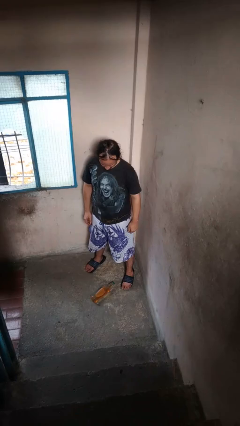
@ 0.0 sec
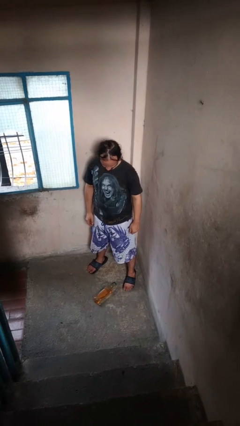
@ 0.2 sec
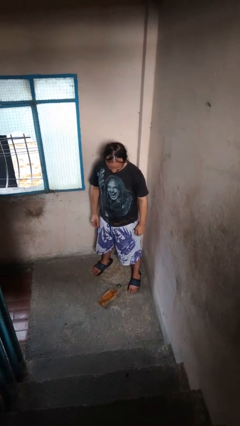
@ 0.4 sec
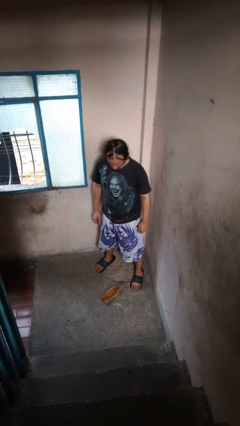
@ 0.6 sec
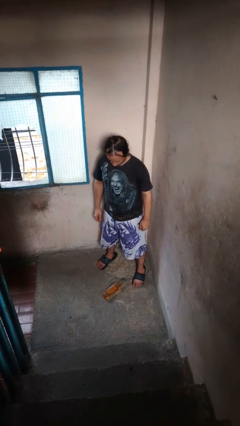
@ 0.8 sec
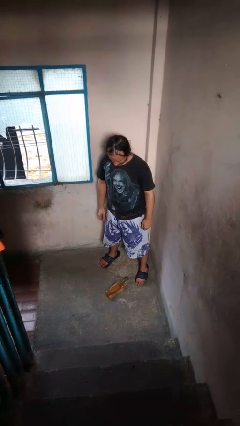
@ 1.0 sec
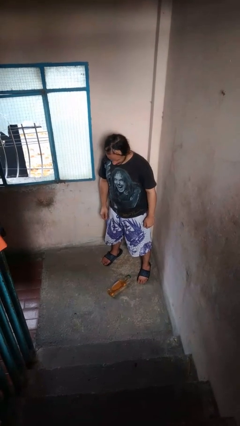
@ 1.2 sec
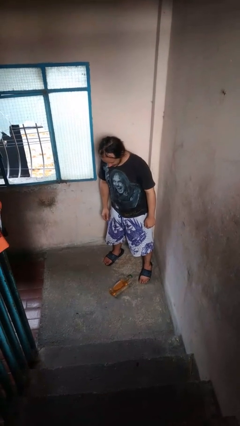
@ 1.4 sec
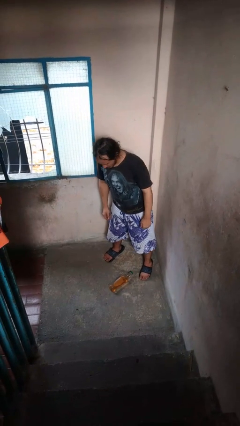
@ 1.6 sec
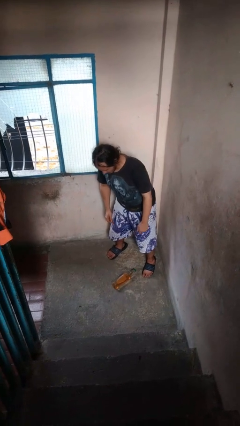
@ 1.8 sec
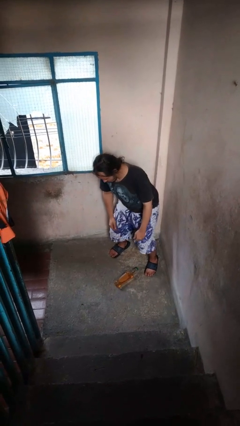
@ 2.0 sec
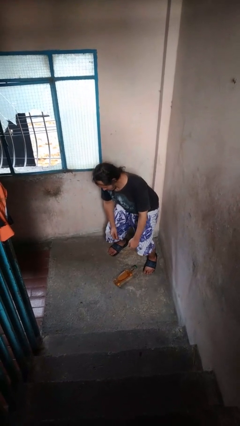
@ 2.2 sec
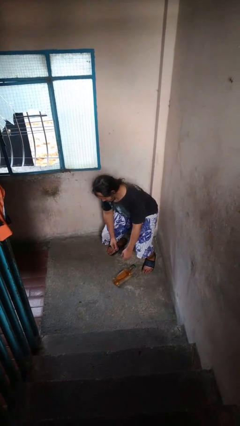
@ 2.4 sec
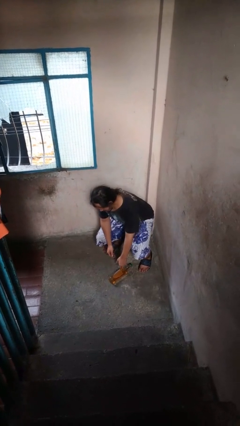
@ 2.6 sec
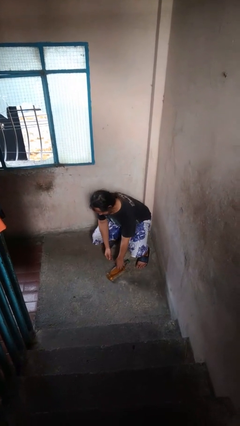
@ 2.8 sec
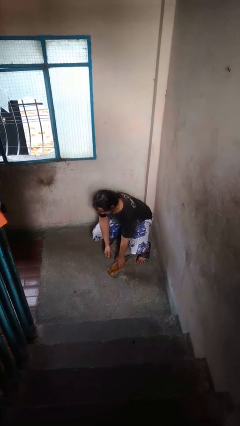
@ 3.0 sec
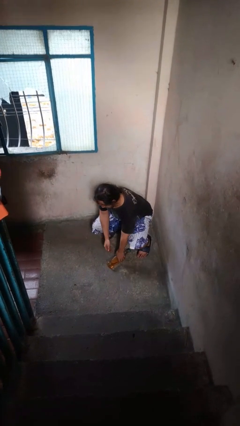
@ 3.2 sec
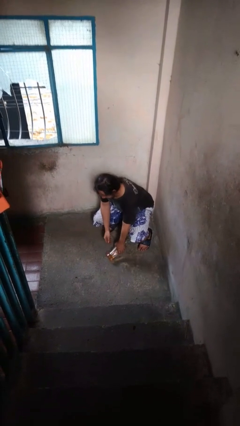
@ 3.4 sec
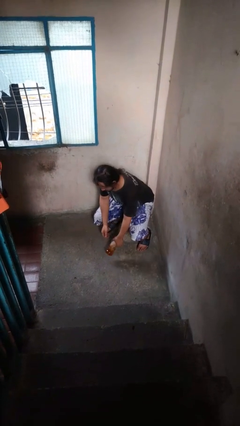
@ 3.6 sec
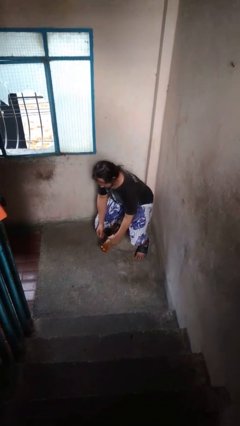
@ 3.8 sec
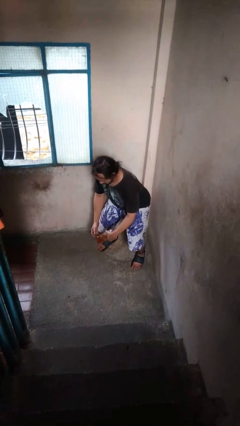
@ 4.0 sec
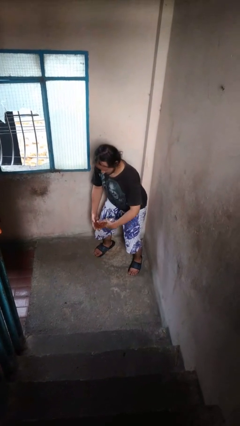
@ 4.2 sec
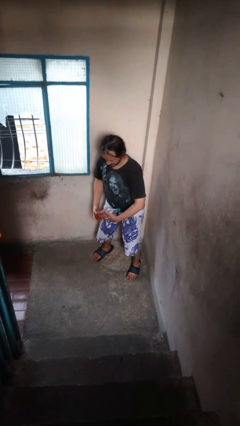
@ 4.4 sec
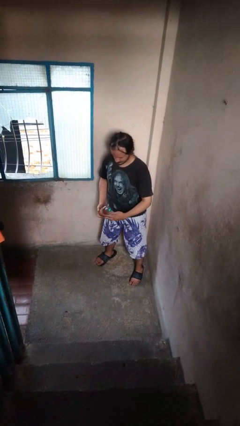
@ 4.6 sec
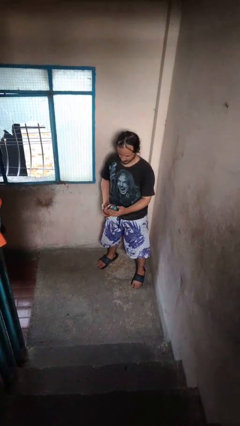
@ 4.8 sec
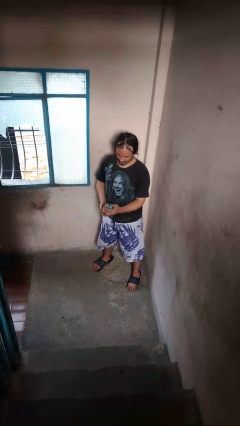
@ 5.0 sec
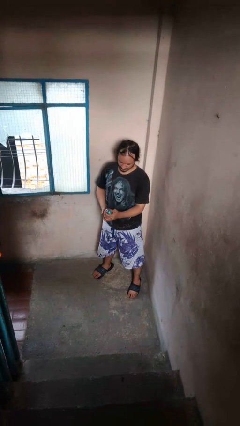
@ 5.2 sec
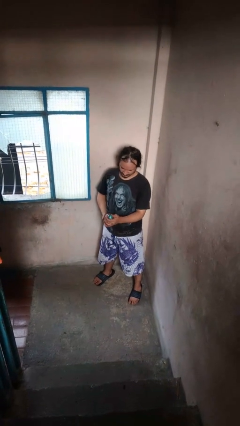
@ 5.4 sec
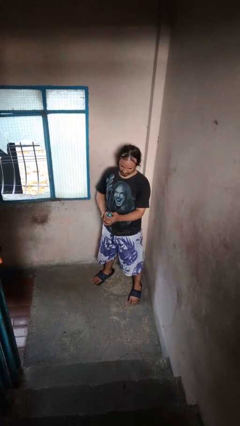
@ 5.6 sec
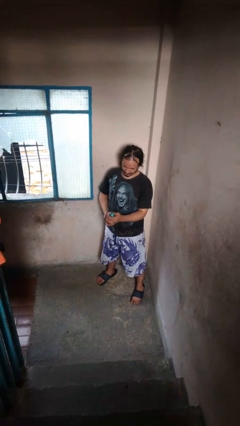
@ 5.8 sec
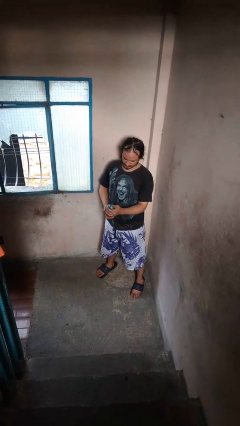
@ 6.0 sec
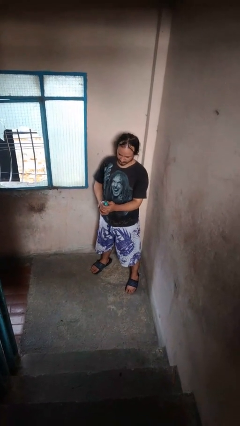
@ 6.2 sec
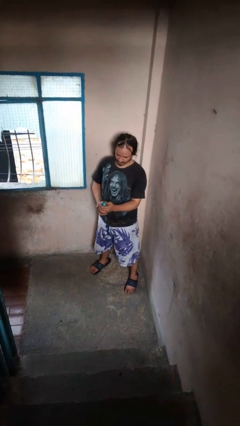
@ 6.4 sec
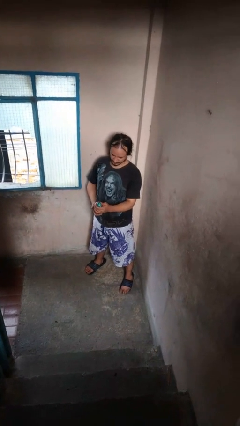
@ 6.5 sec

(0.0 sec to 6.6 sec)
person picks up object from floor

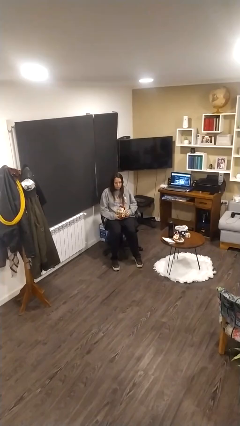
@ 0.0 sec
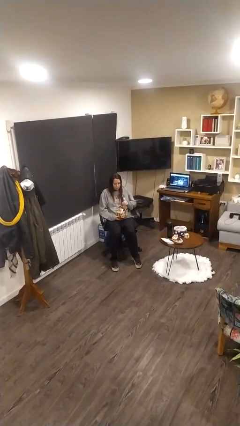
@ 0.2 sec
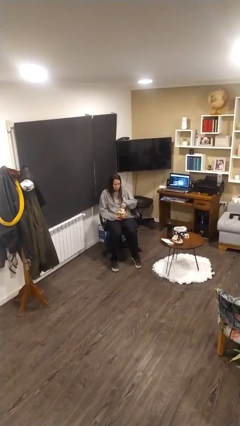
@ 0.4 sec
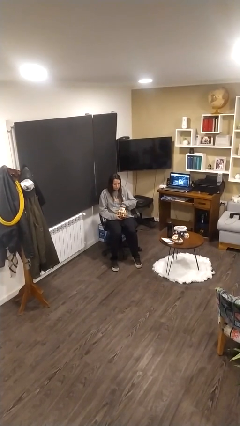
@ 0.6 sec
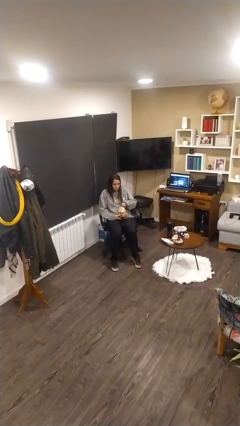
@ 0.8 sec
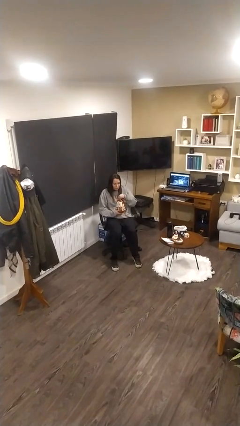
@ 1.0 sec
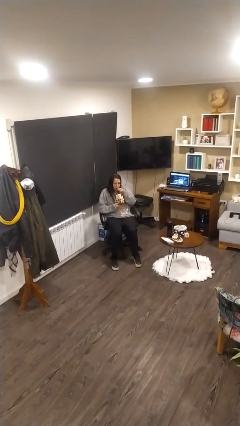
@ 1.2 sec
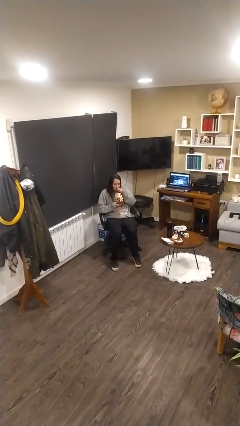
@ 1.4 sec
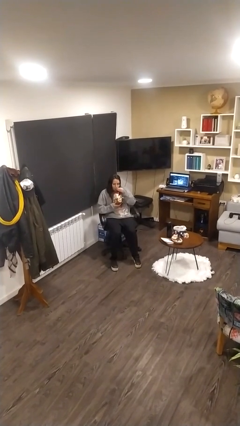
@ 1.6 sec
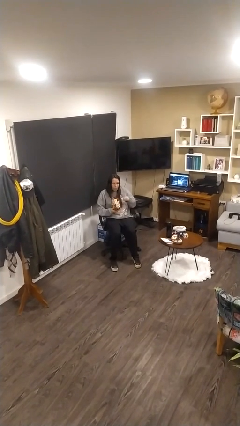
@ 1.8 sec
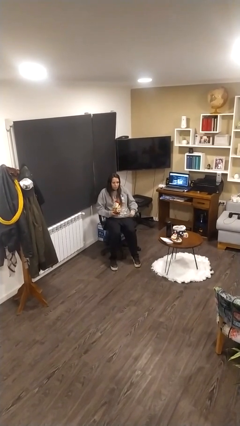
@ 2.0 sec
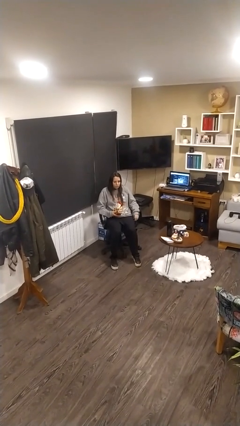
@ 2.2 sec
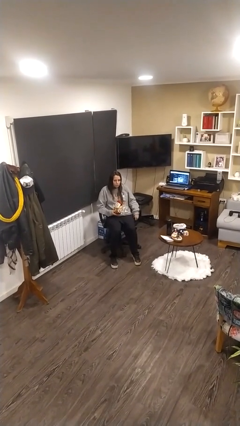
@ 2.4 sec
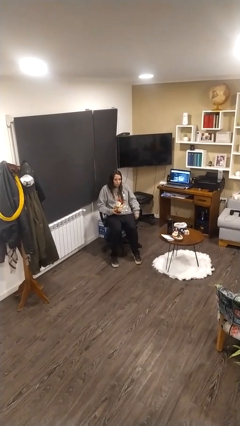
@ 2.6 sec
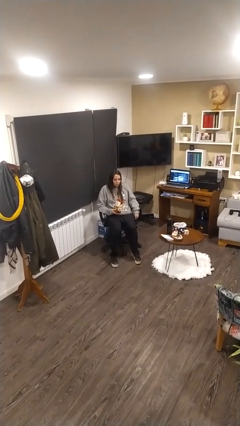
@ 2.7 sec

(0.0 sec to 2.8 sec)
person eats snack from bag

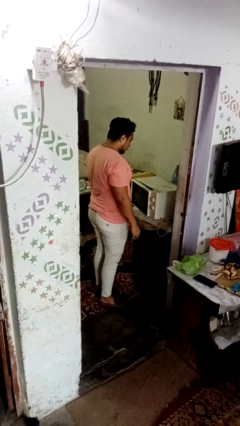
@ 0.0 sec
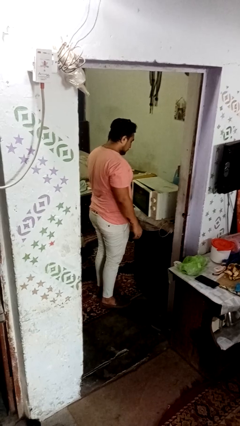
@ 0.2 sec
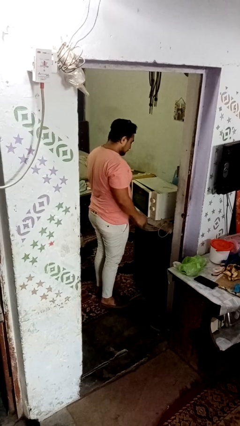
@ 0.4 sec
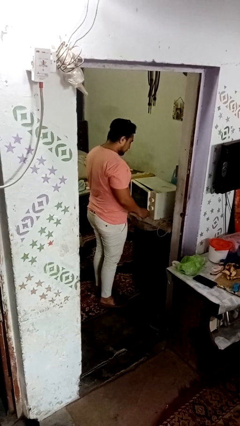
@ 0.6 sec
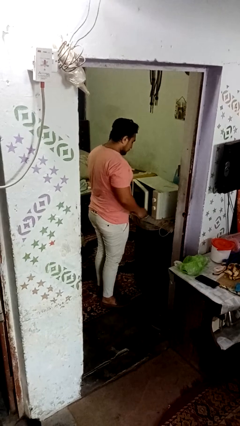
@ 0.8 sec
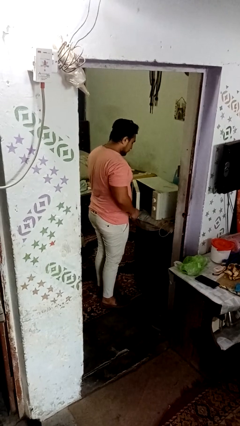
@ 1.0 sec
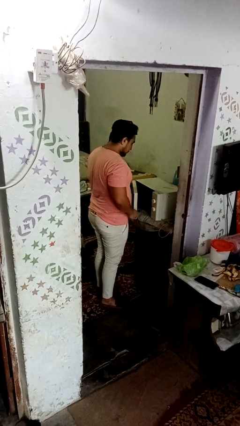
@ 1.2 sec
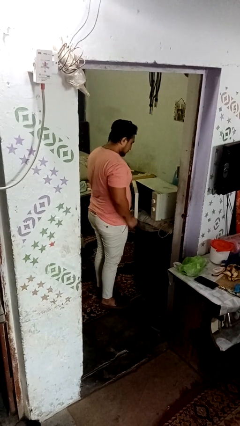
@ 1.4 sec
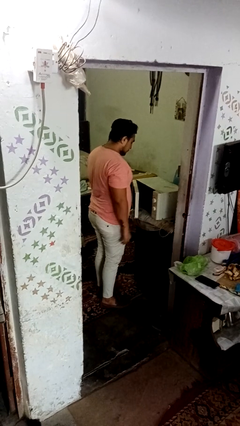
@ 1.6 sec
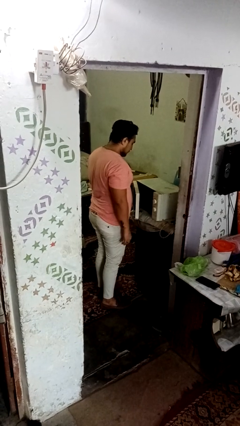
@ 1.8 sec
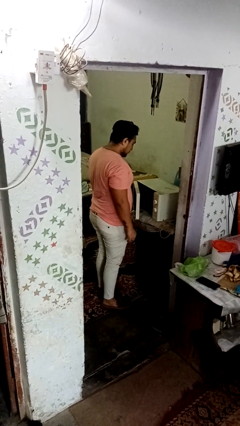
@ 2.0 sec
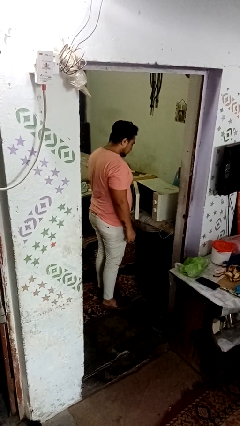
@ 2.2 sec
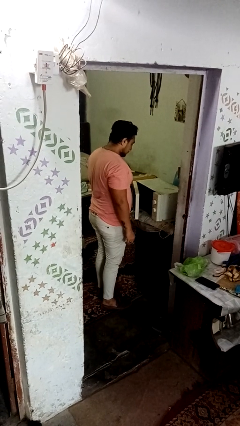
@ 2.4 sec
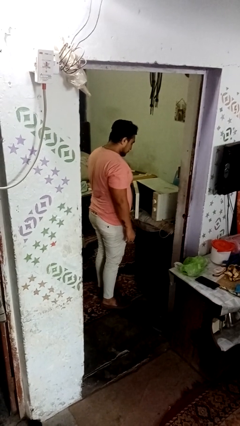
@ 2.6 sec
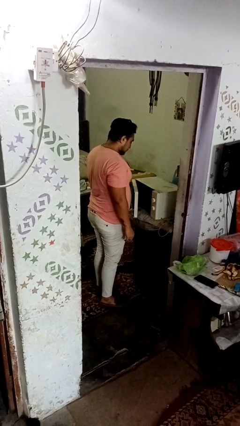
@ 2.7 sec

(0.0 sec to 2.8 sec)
person opens dishwasher

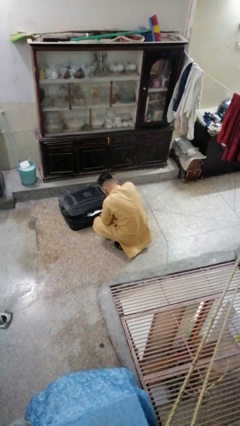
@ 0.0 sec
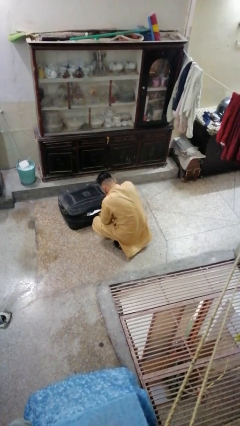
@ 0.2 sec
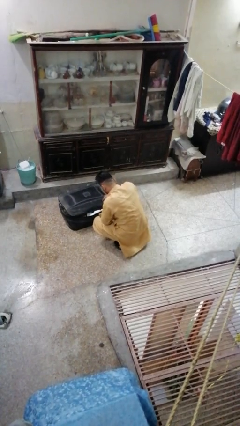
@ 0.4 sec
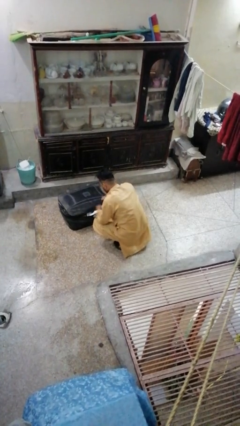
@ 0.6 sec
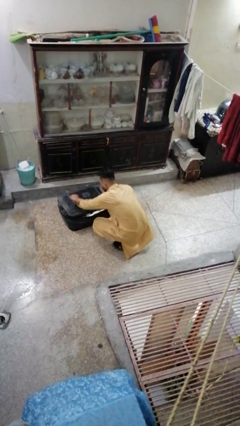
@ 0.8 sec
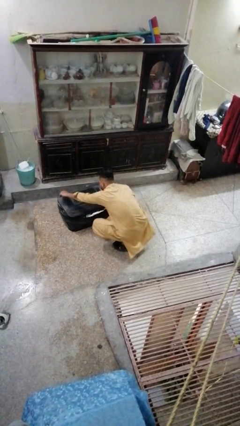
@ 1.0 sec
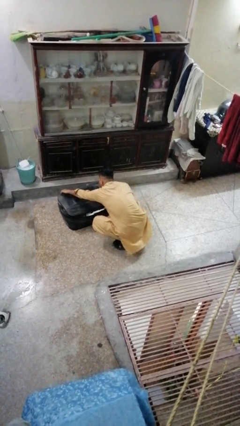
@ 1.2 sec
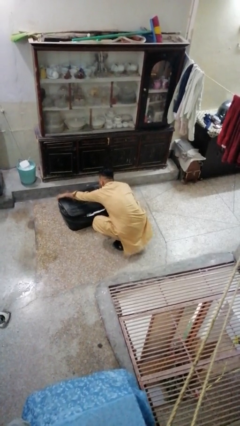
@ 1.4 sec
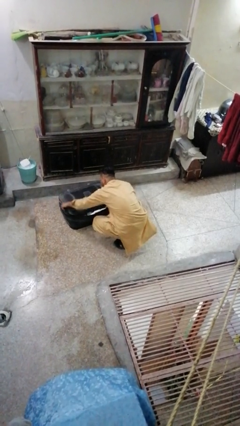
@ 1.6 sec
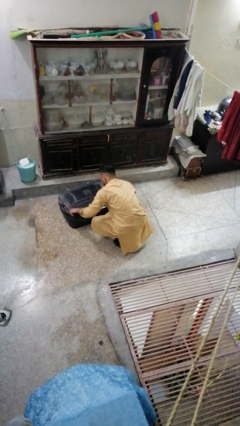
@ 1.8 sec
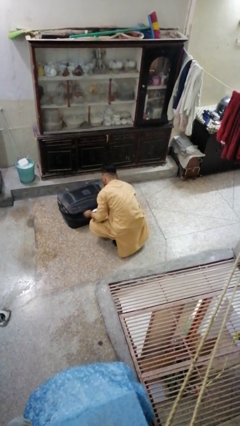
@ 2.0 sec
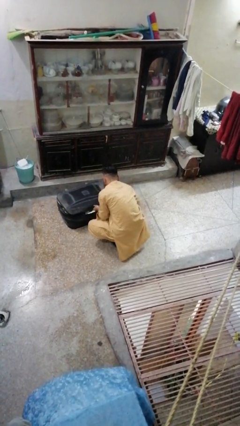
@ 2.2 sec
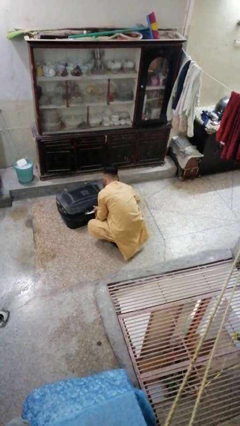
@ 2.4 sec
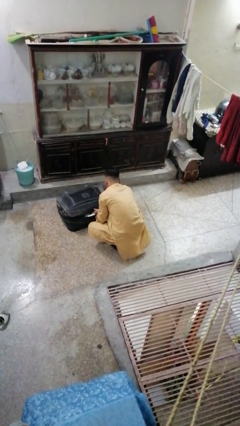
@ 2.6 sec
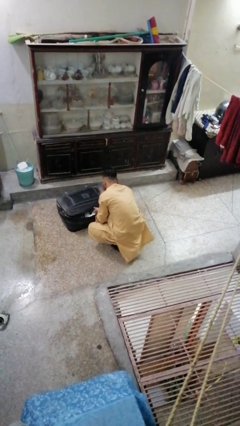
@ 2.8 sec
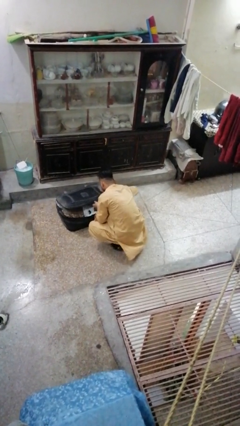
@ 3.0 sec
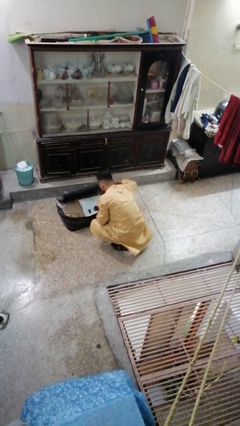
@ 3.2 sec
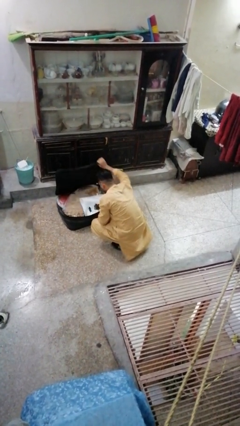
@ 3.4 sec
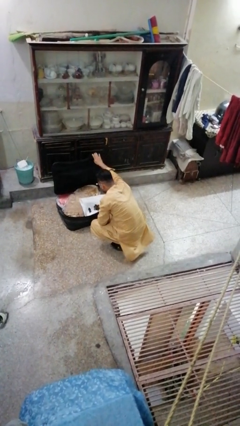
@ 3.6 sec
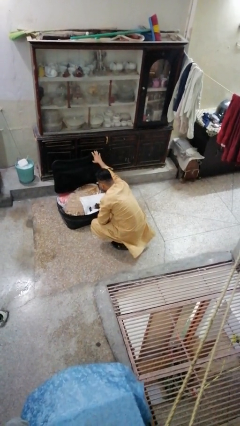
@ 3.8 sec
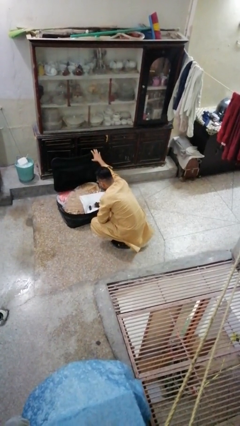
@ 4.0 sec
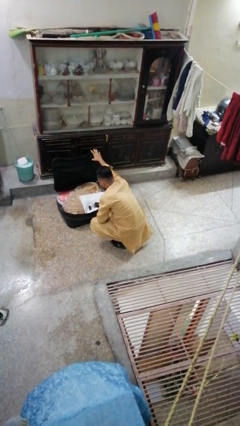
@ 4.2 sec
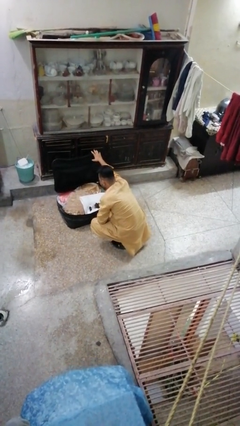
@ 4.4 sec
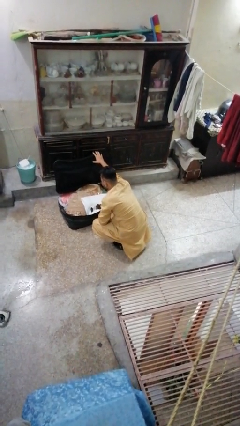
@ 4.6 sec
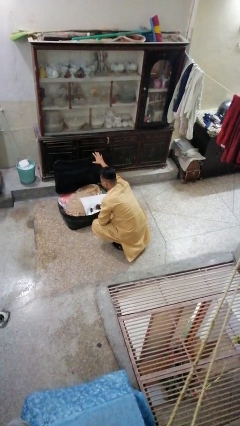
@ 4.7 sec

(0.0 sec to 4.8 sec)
person opens suitcase

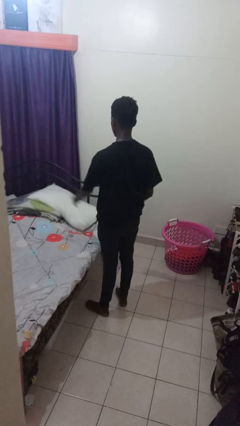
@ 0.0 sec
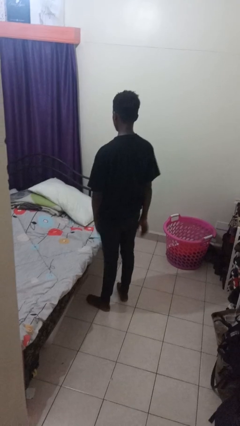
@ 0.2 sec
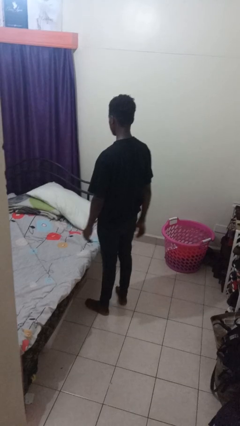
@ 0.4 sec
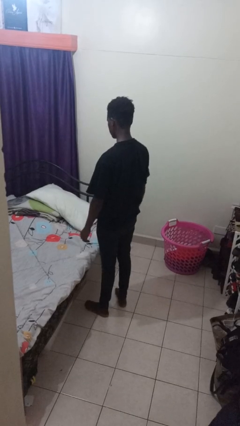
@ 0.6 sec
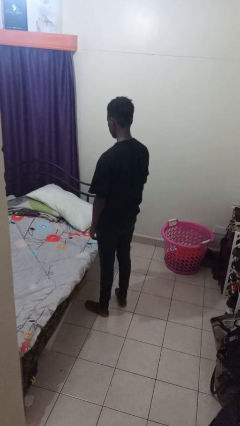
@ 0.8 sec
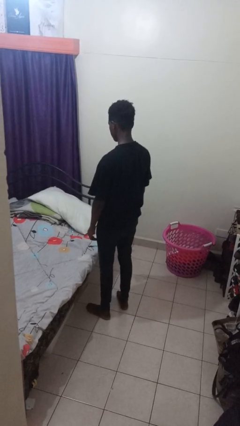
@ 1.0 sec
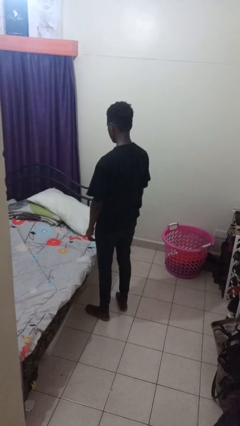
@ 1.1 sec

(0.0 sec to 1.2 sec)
person puts down object on bed
